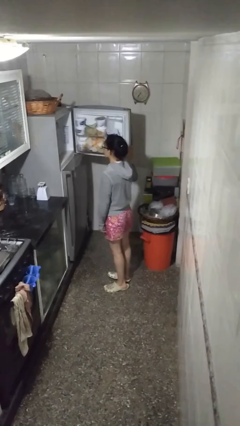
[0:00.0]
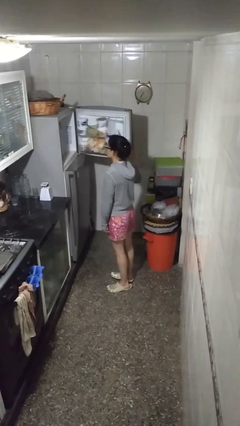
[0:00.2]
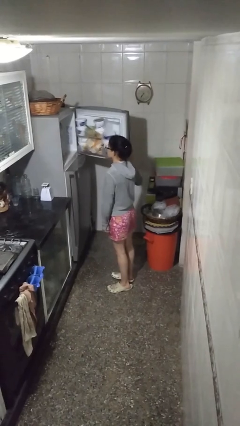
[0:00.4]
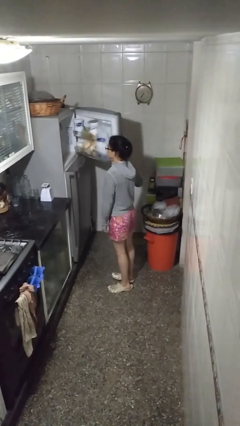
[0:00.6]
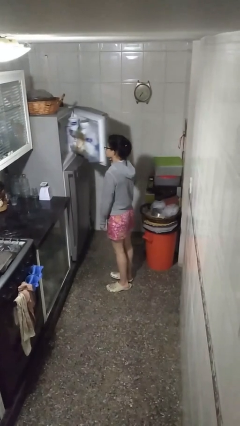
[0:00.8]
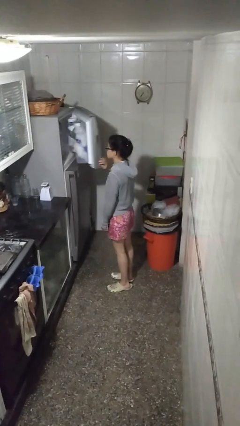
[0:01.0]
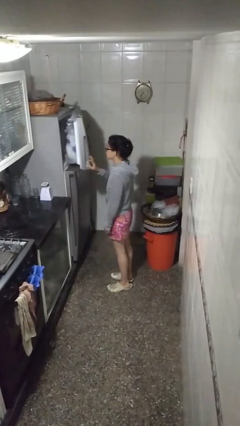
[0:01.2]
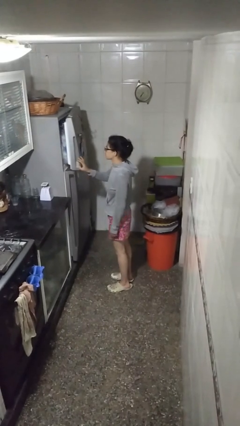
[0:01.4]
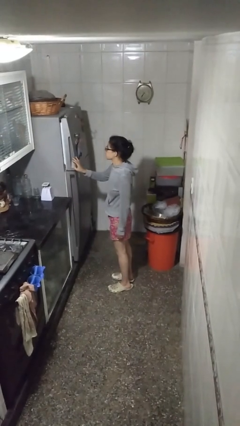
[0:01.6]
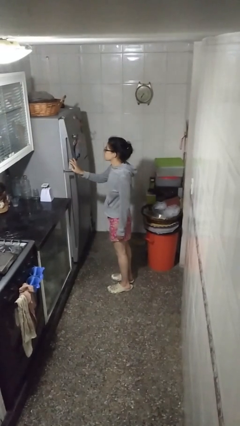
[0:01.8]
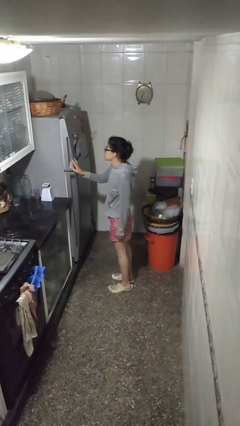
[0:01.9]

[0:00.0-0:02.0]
person closes refrigerator

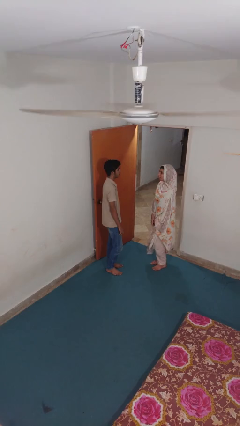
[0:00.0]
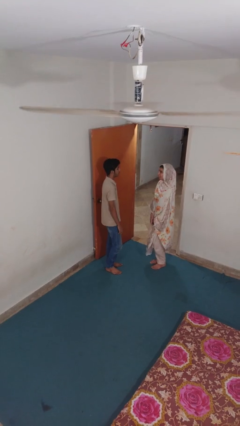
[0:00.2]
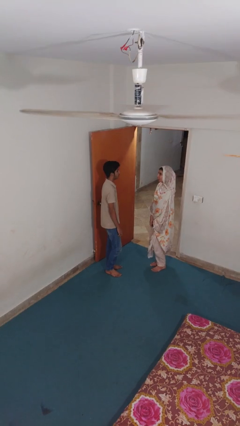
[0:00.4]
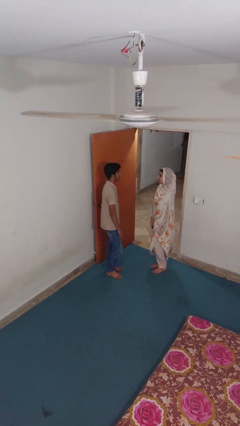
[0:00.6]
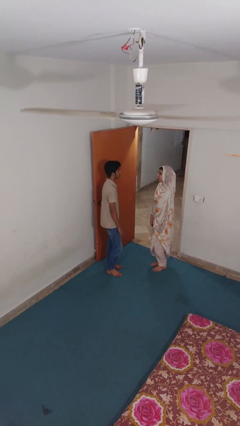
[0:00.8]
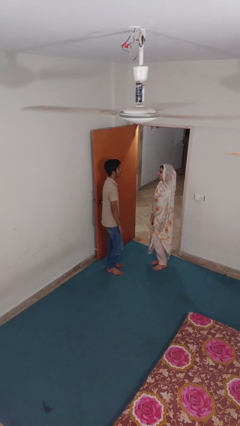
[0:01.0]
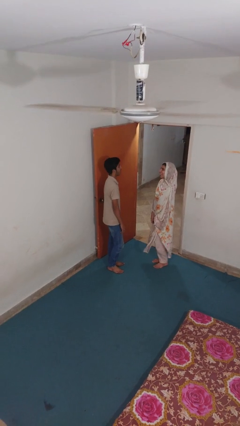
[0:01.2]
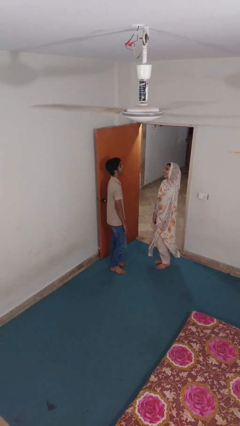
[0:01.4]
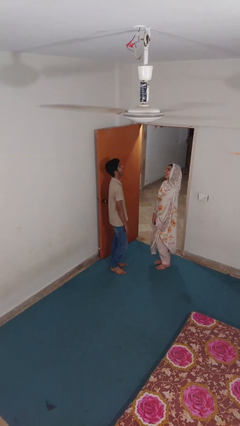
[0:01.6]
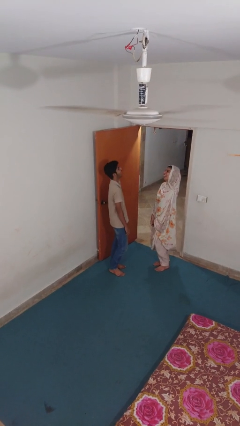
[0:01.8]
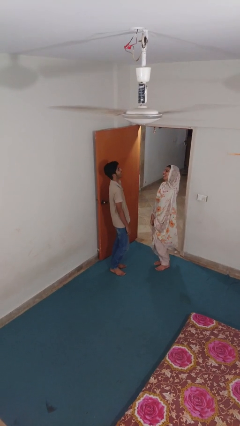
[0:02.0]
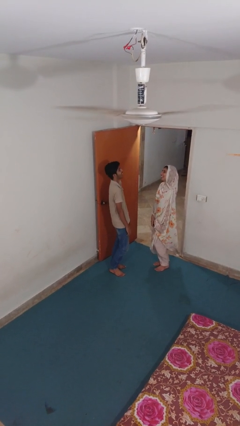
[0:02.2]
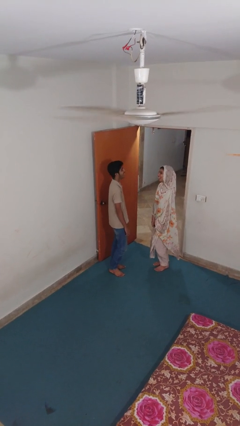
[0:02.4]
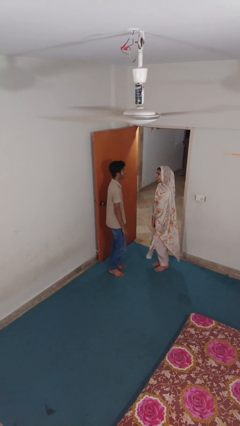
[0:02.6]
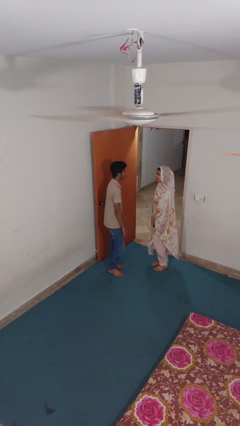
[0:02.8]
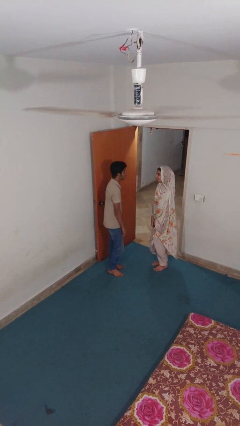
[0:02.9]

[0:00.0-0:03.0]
person laughs with person

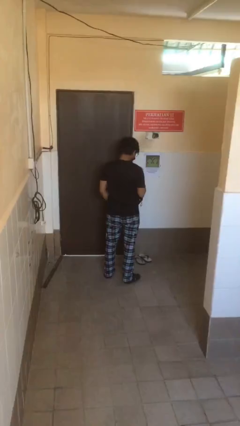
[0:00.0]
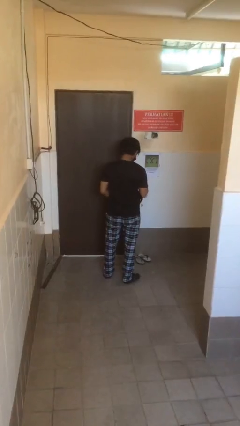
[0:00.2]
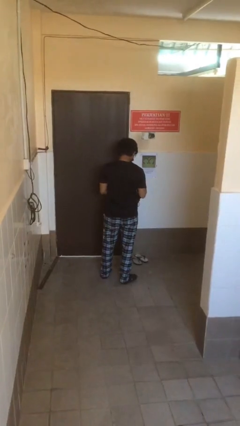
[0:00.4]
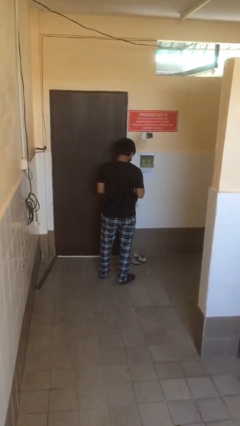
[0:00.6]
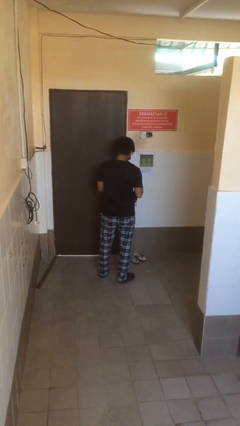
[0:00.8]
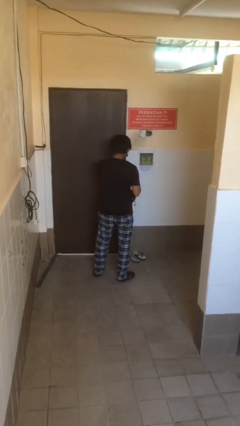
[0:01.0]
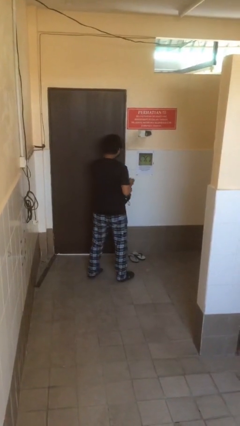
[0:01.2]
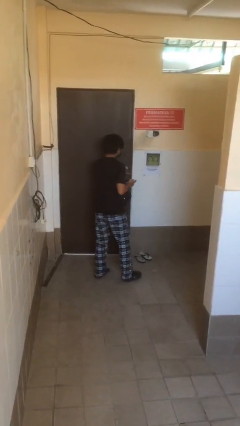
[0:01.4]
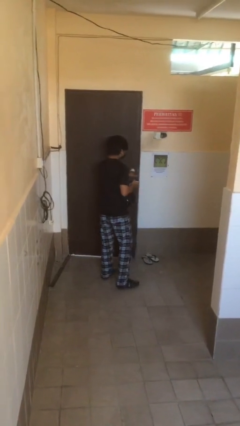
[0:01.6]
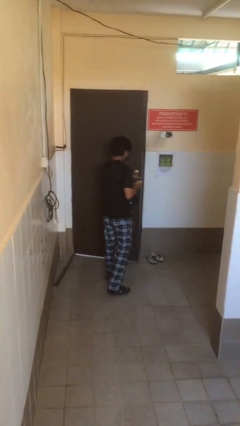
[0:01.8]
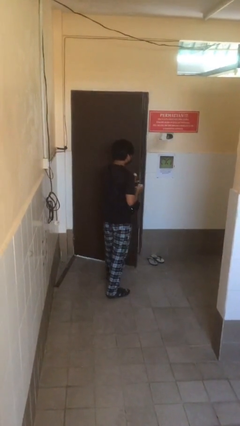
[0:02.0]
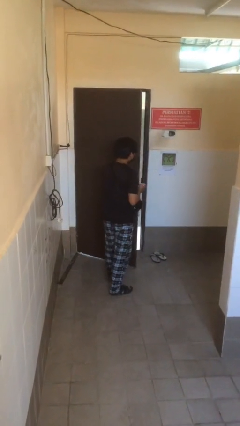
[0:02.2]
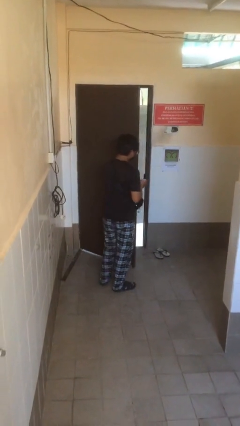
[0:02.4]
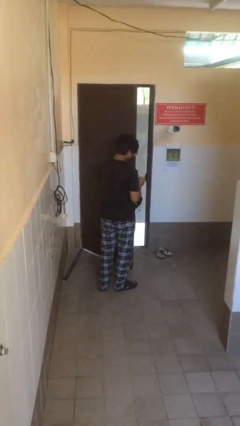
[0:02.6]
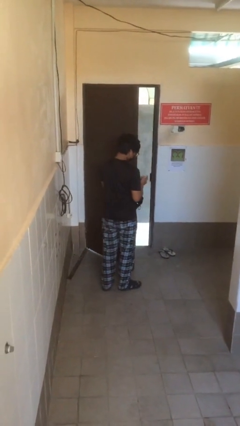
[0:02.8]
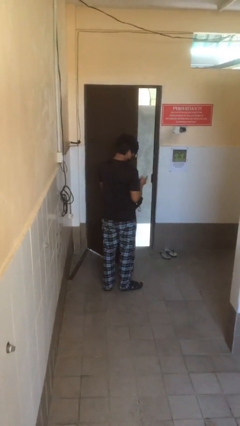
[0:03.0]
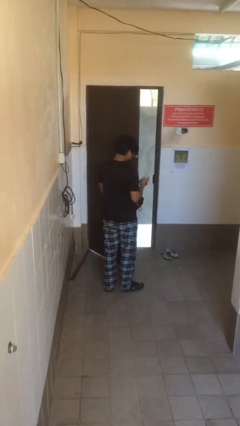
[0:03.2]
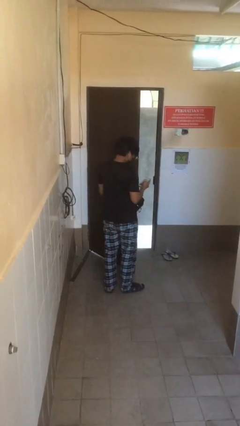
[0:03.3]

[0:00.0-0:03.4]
person opens facility door

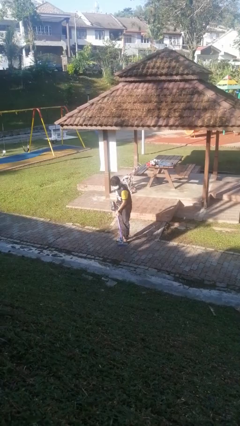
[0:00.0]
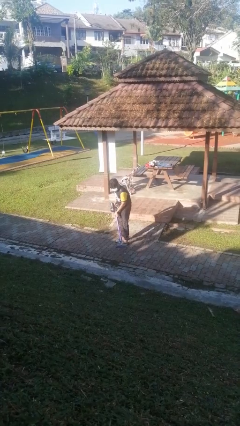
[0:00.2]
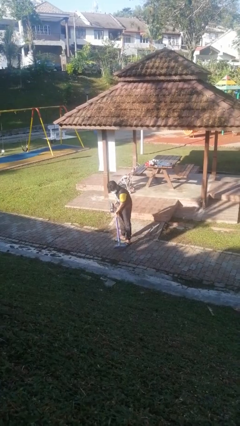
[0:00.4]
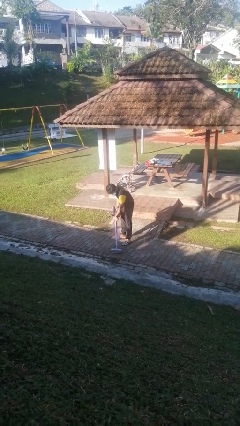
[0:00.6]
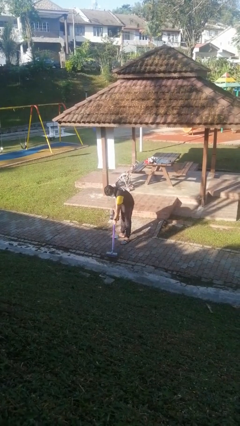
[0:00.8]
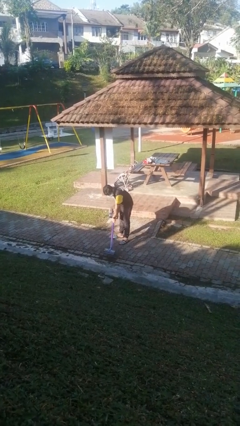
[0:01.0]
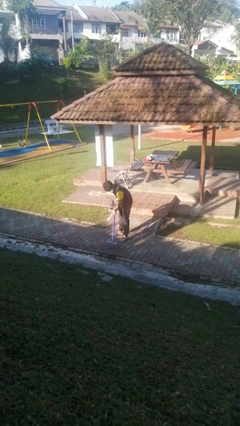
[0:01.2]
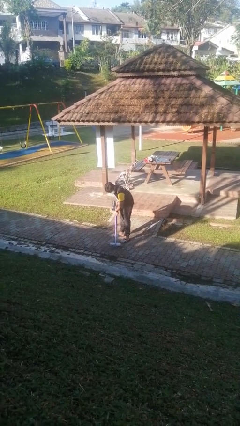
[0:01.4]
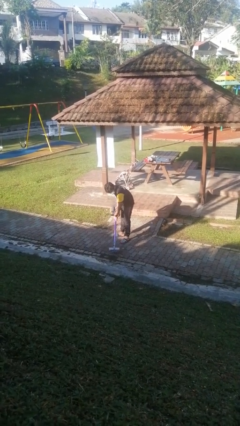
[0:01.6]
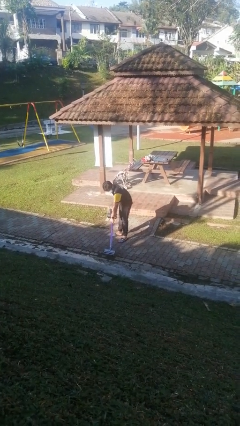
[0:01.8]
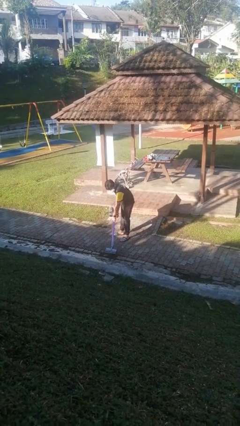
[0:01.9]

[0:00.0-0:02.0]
person vacuums carpet

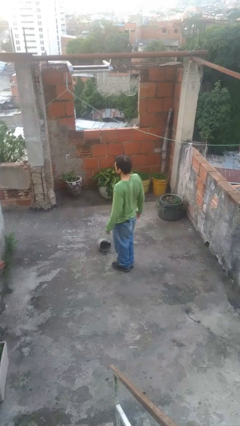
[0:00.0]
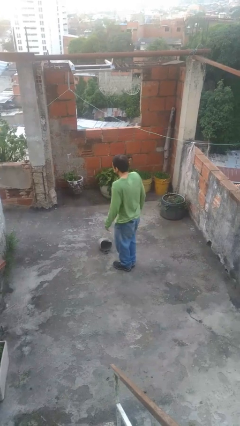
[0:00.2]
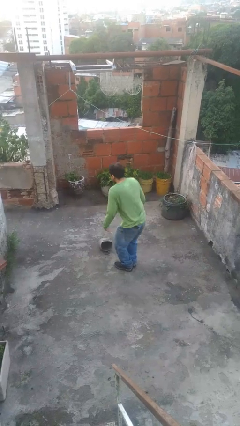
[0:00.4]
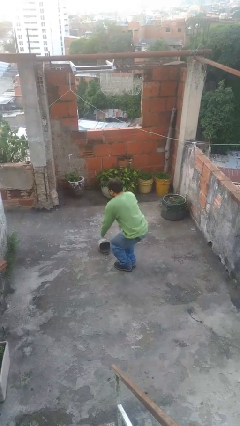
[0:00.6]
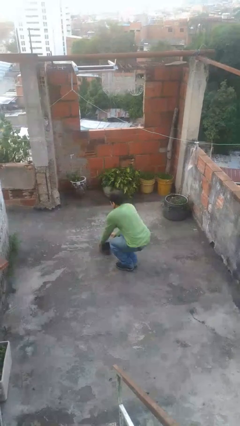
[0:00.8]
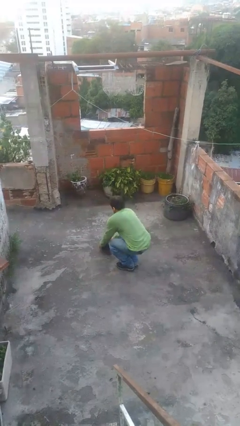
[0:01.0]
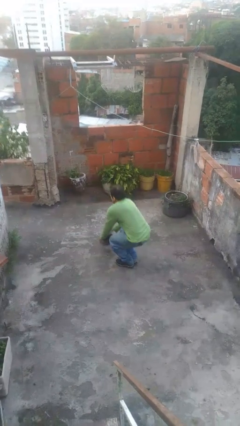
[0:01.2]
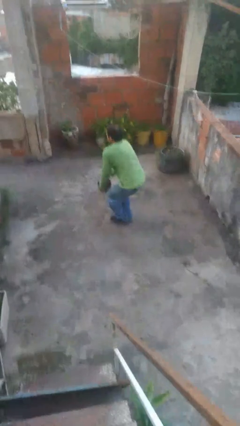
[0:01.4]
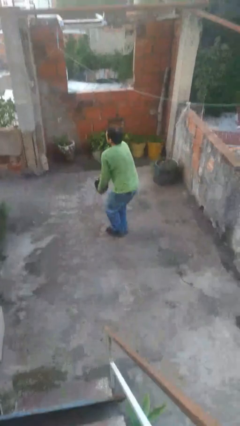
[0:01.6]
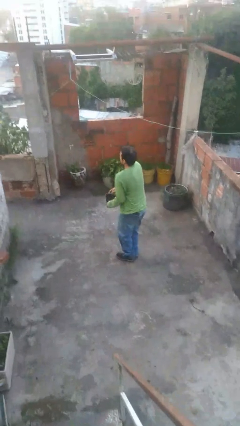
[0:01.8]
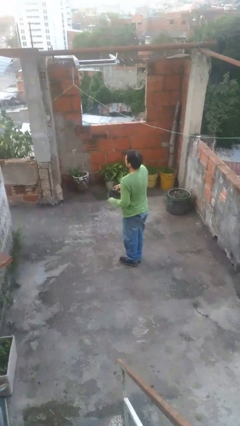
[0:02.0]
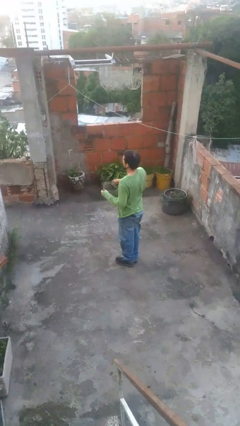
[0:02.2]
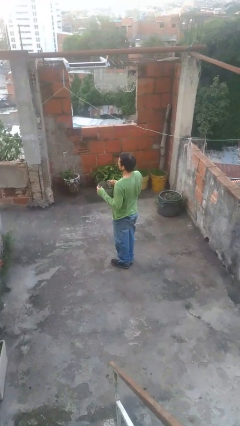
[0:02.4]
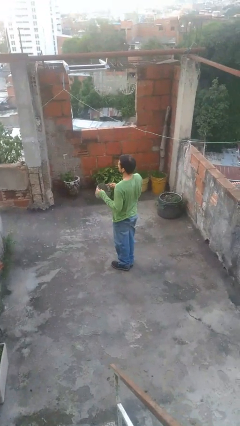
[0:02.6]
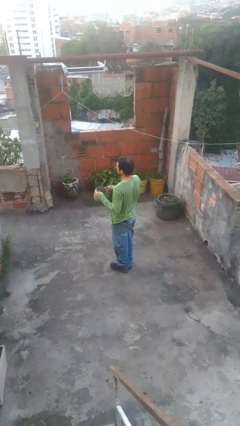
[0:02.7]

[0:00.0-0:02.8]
person picks up object from floor

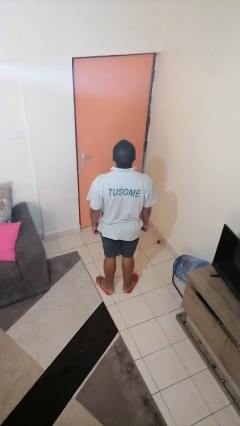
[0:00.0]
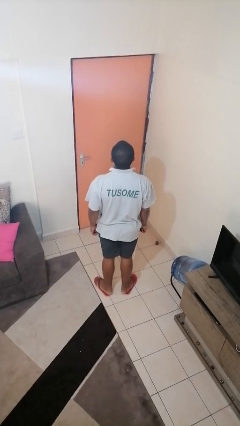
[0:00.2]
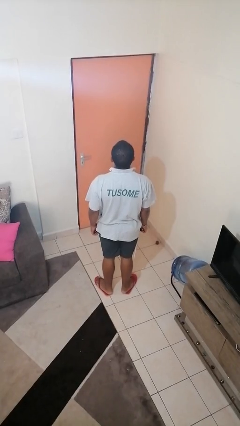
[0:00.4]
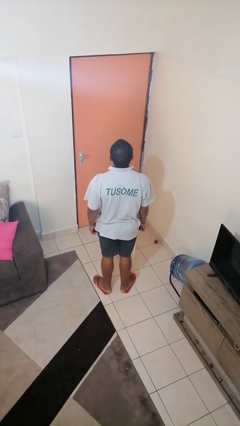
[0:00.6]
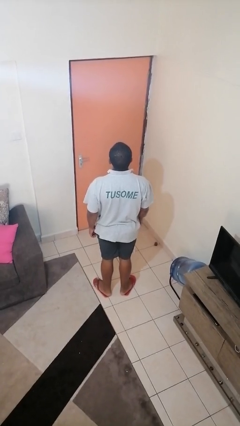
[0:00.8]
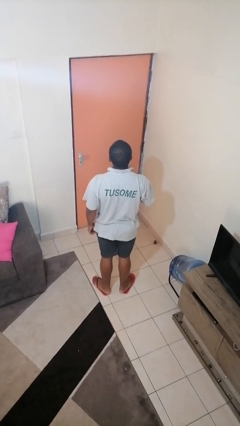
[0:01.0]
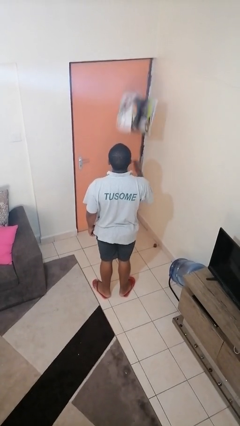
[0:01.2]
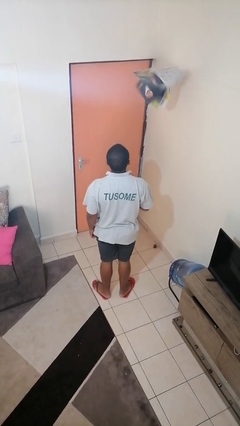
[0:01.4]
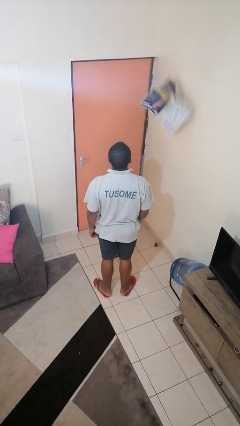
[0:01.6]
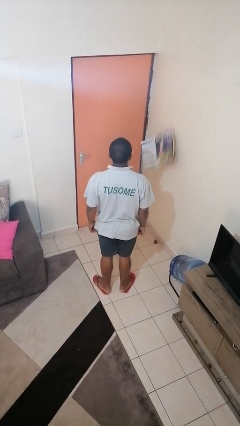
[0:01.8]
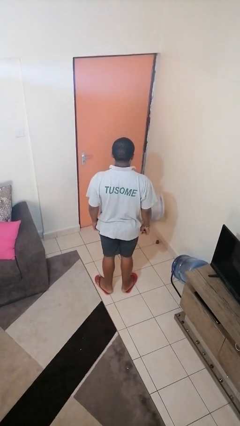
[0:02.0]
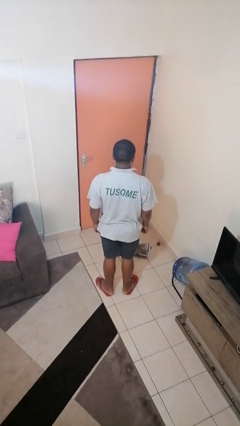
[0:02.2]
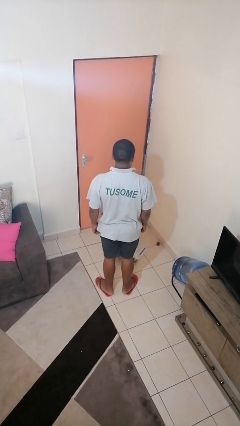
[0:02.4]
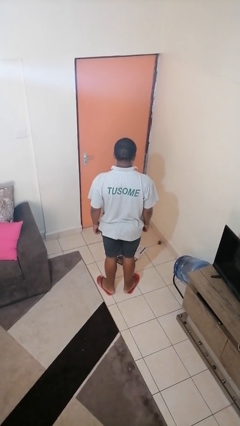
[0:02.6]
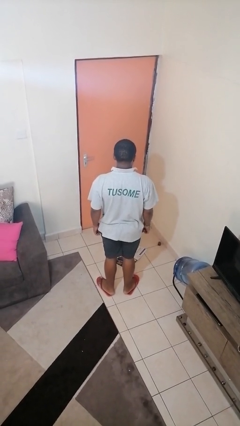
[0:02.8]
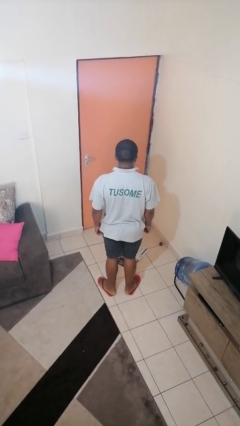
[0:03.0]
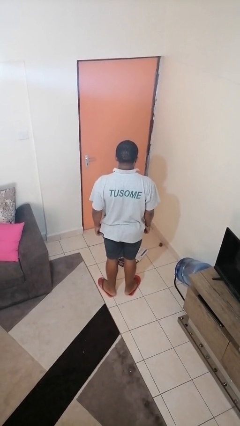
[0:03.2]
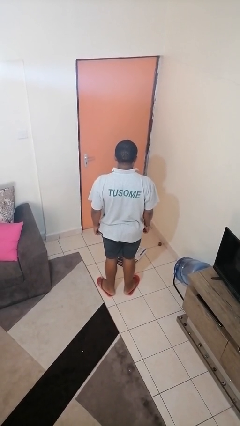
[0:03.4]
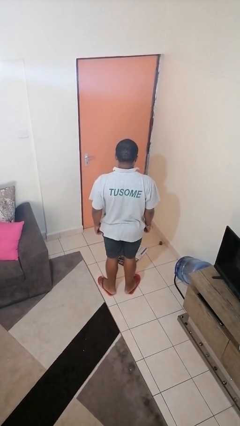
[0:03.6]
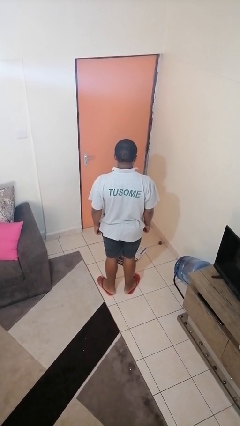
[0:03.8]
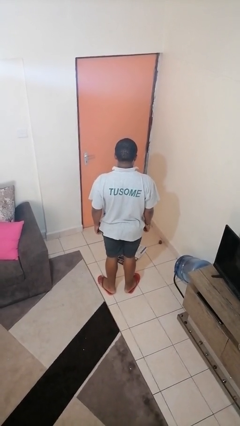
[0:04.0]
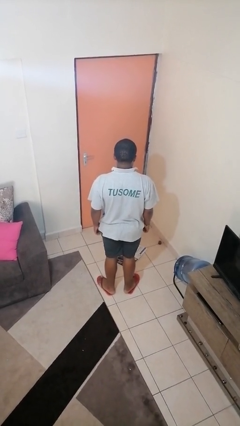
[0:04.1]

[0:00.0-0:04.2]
person throws object into air
